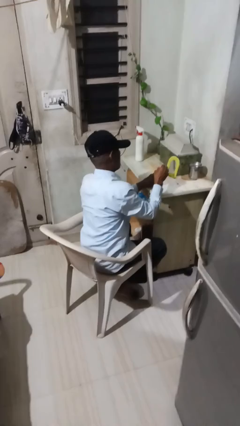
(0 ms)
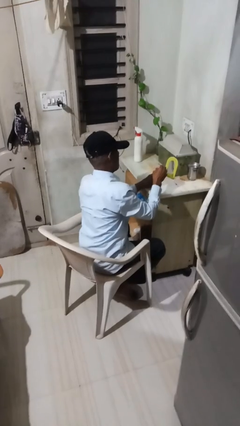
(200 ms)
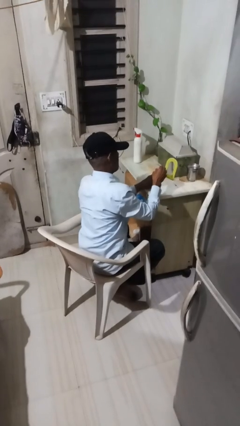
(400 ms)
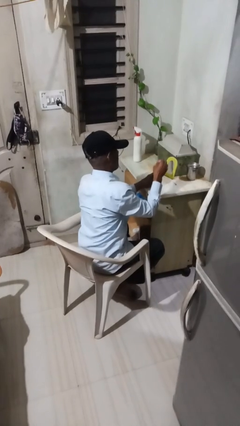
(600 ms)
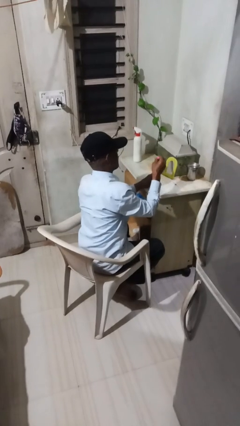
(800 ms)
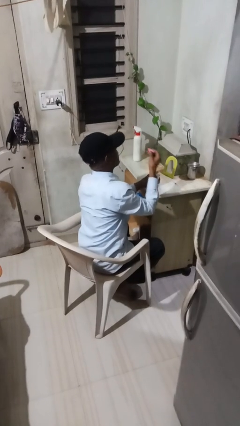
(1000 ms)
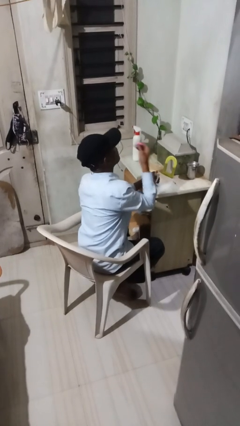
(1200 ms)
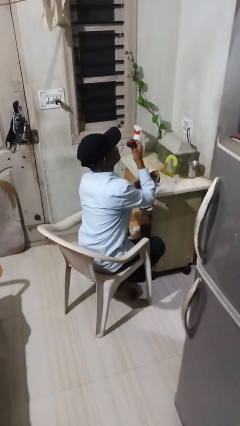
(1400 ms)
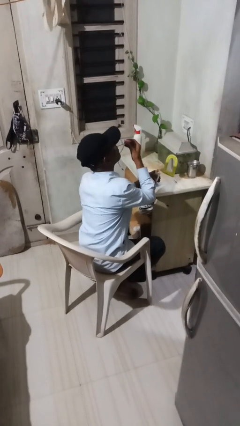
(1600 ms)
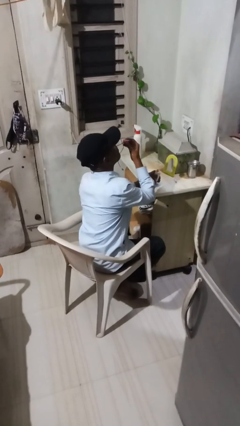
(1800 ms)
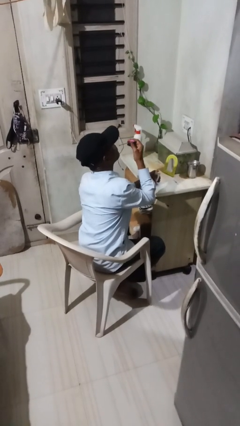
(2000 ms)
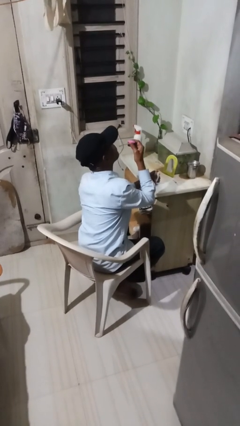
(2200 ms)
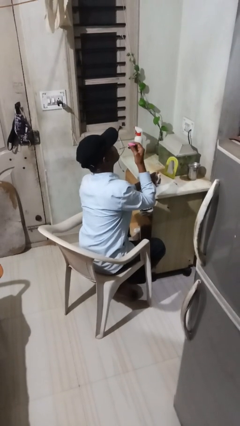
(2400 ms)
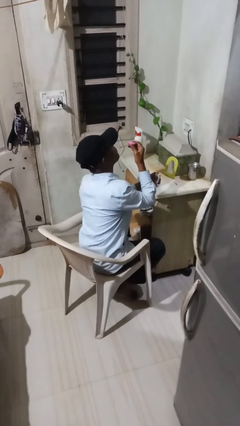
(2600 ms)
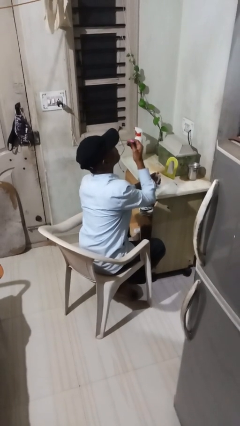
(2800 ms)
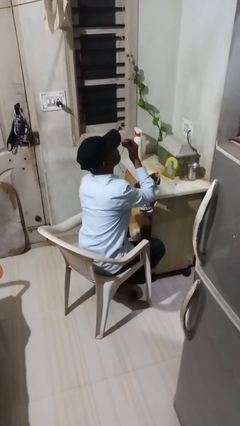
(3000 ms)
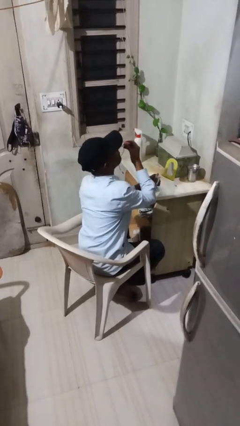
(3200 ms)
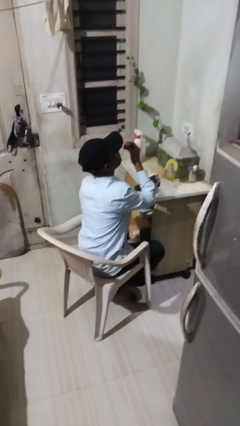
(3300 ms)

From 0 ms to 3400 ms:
person applies lip makeup

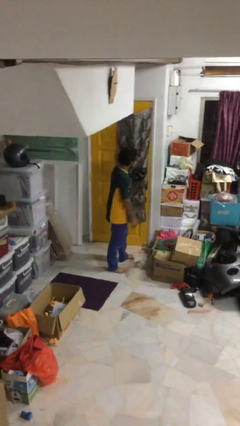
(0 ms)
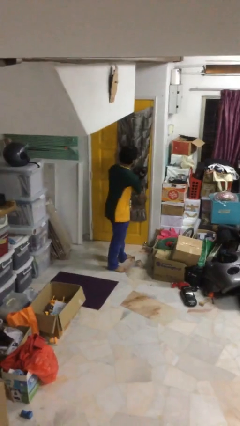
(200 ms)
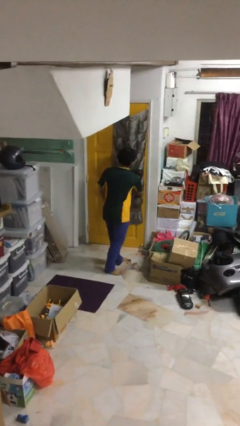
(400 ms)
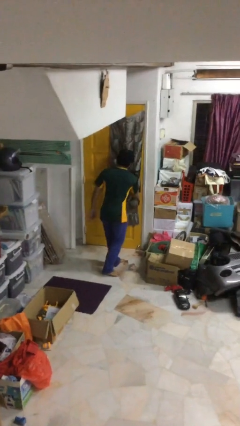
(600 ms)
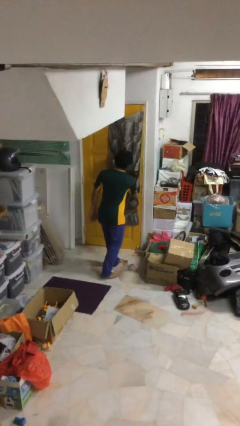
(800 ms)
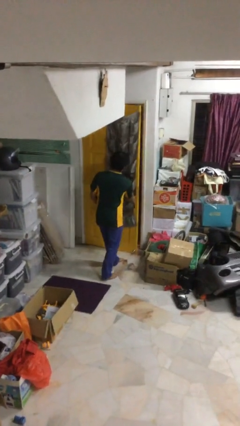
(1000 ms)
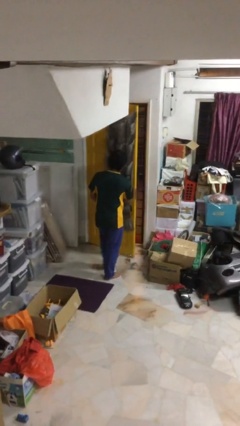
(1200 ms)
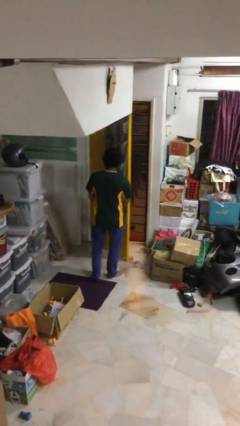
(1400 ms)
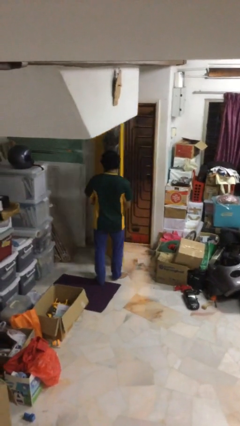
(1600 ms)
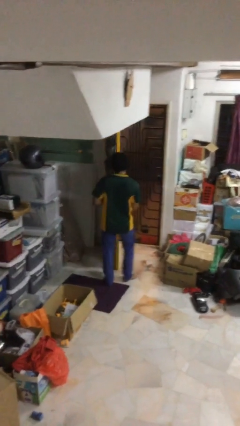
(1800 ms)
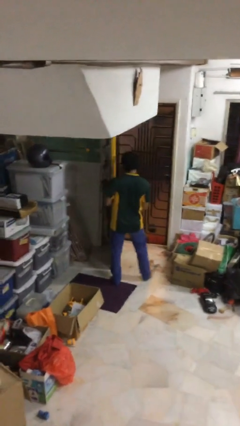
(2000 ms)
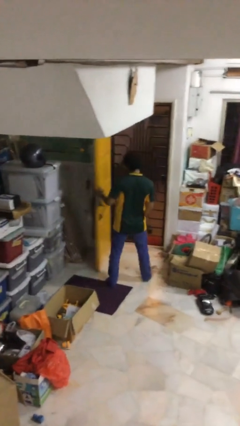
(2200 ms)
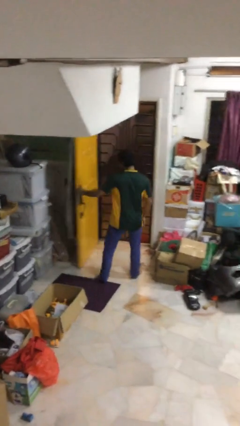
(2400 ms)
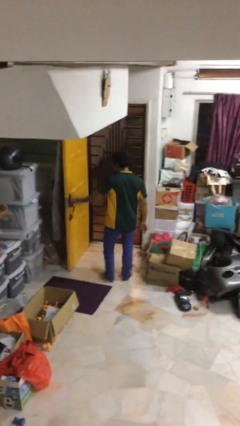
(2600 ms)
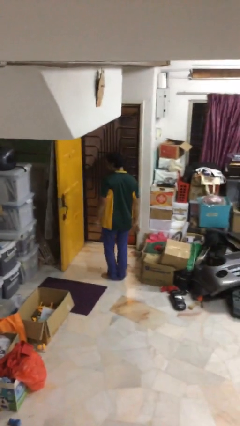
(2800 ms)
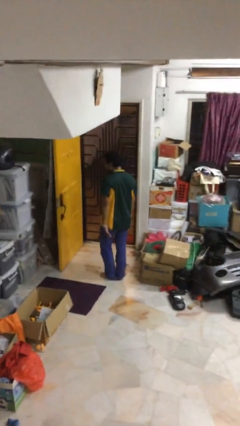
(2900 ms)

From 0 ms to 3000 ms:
person opens facility door

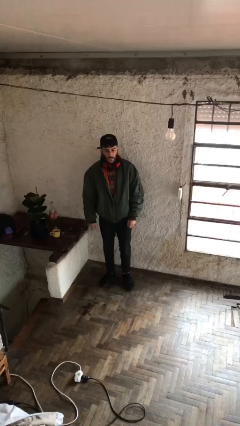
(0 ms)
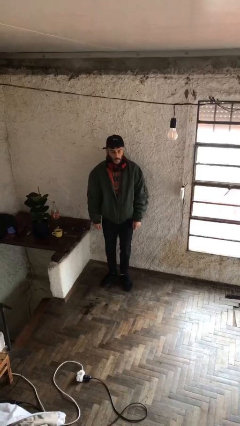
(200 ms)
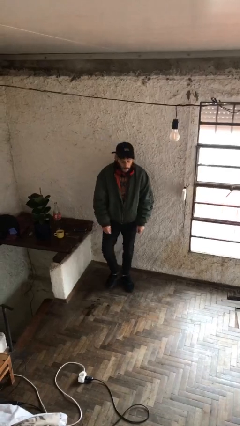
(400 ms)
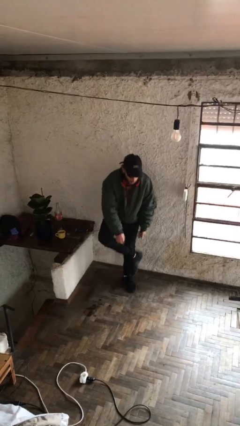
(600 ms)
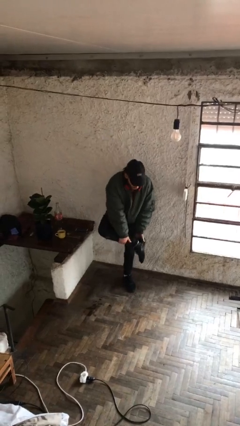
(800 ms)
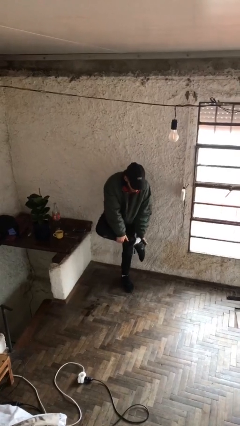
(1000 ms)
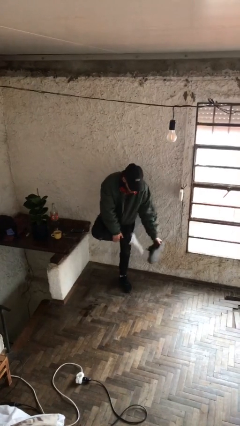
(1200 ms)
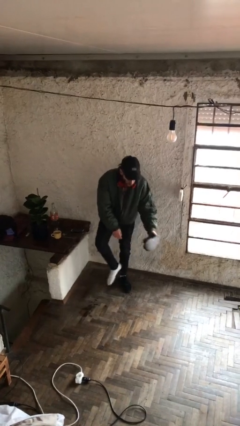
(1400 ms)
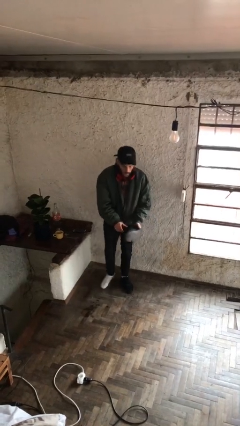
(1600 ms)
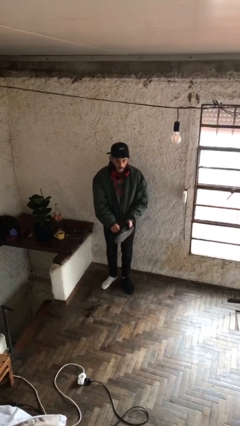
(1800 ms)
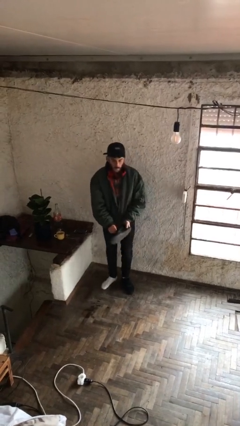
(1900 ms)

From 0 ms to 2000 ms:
person takes off shoes

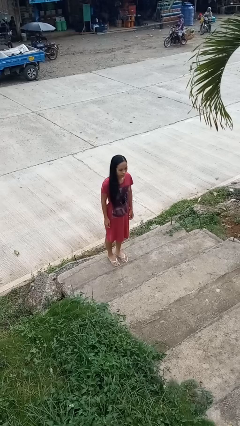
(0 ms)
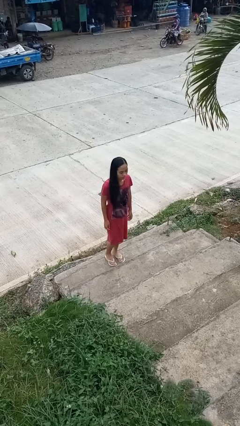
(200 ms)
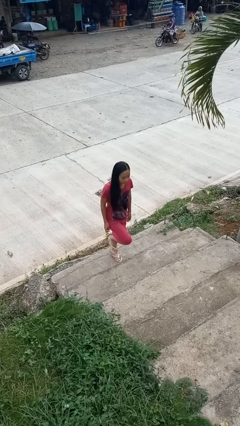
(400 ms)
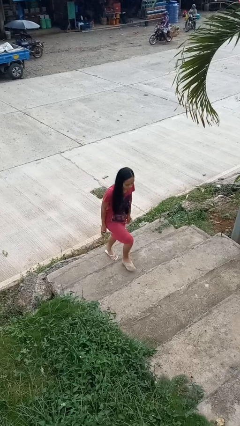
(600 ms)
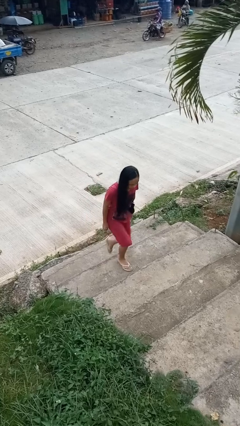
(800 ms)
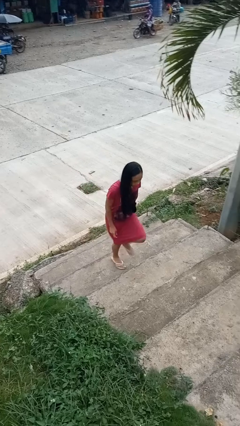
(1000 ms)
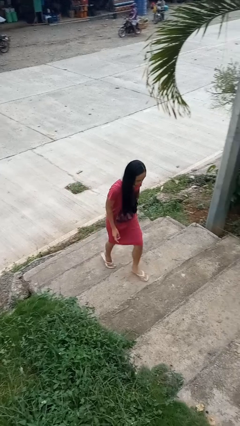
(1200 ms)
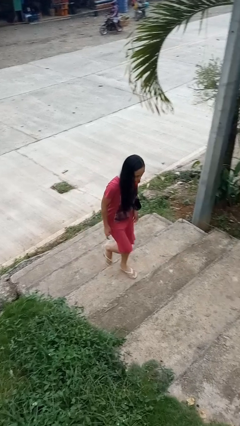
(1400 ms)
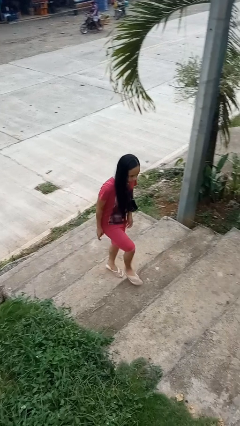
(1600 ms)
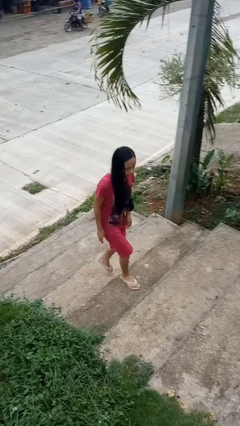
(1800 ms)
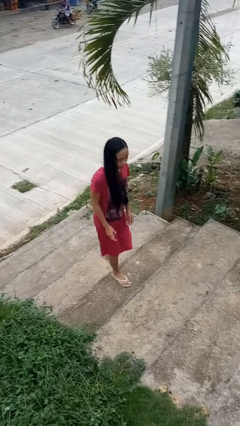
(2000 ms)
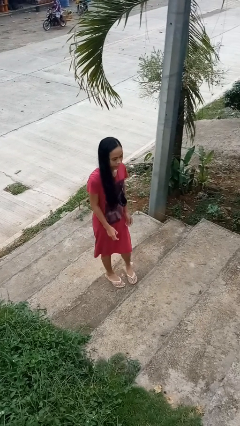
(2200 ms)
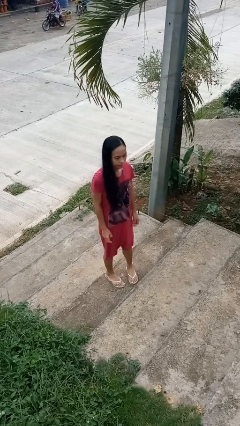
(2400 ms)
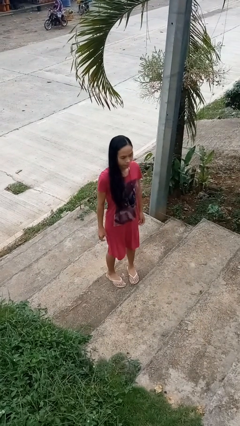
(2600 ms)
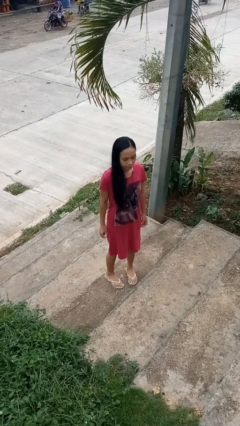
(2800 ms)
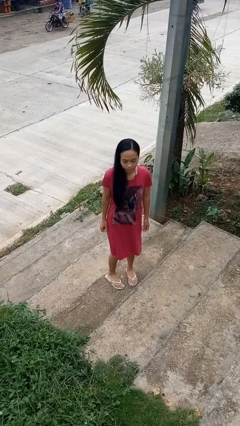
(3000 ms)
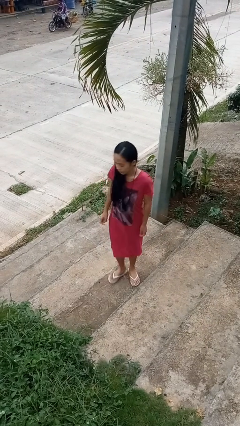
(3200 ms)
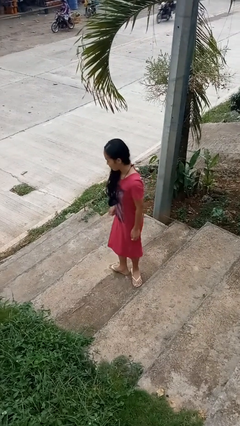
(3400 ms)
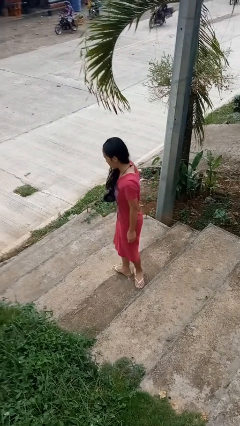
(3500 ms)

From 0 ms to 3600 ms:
person climbs up stairs

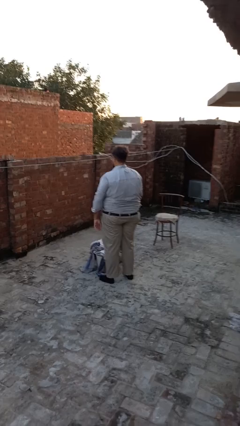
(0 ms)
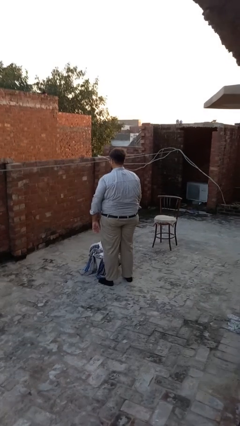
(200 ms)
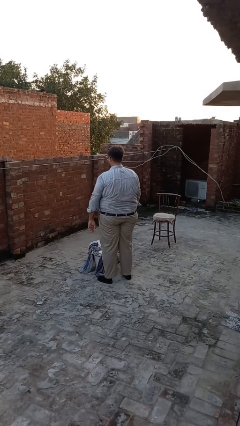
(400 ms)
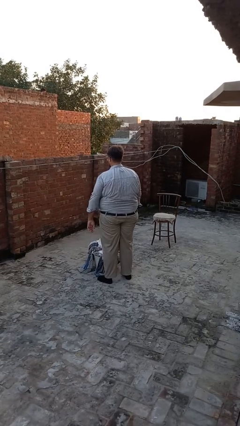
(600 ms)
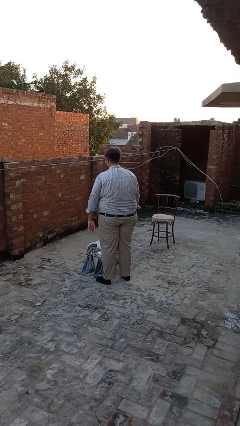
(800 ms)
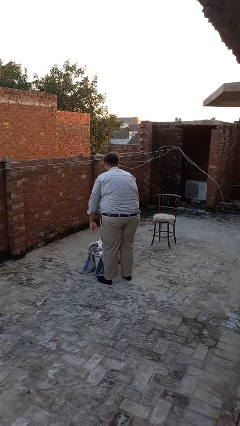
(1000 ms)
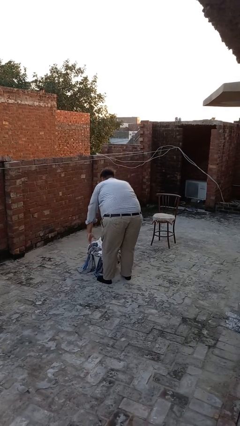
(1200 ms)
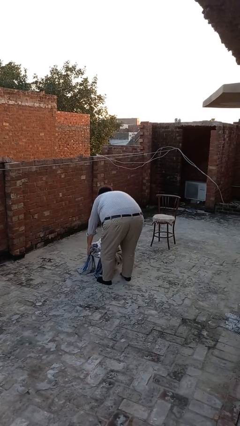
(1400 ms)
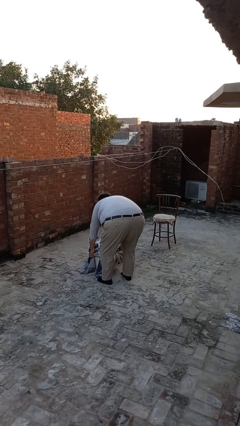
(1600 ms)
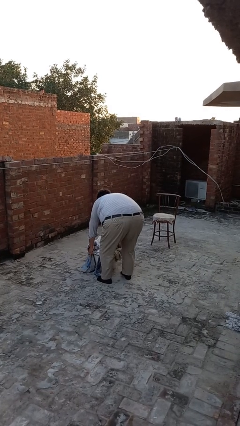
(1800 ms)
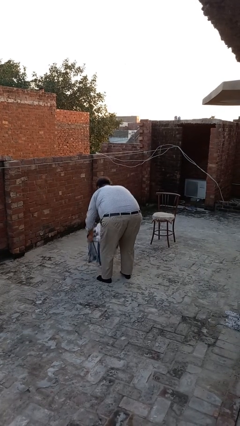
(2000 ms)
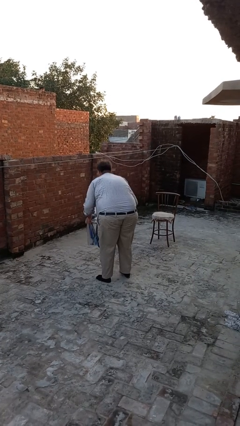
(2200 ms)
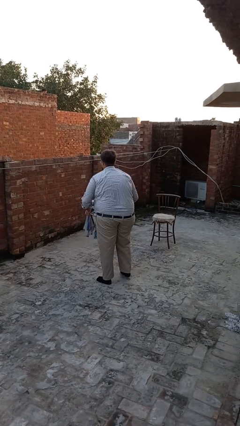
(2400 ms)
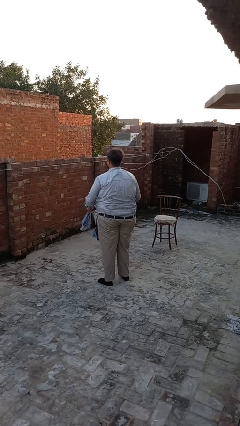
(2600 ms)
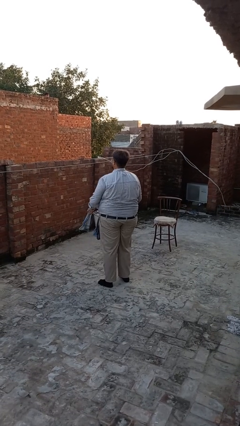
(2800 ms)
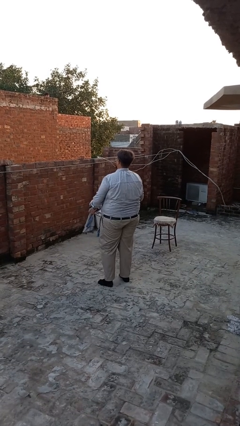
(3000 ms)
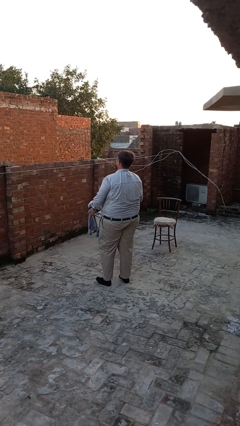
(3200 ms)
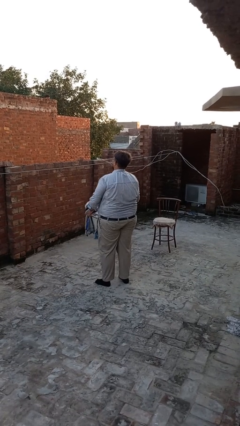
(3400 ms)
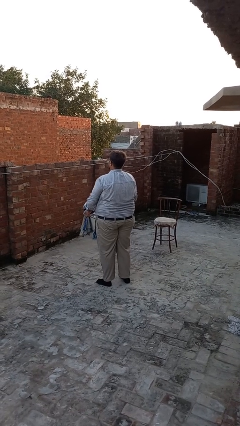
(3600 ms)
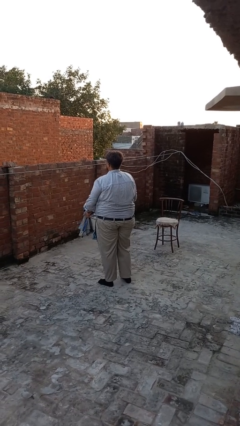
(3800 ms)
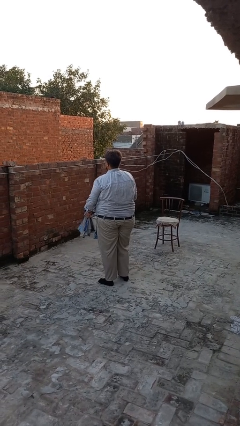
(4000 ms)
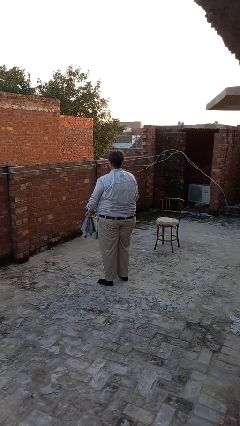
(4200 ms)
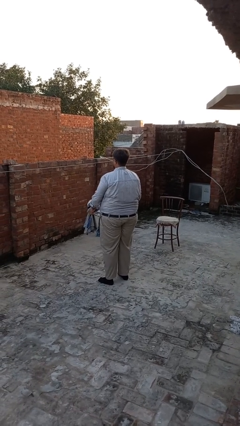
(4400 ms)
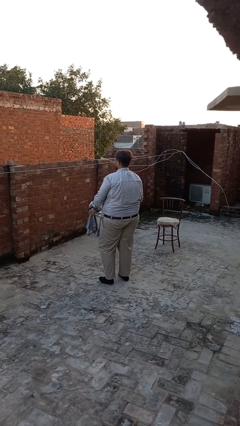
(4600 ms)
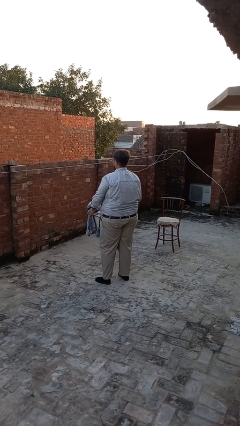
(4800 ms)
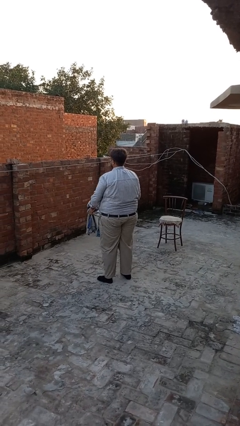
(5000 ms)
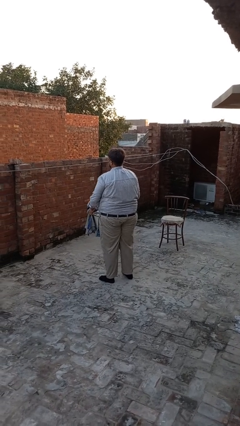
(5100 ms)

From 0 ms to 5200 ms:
person carries laundry basket
